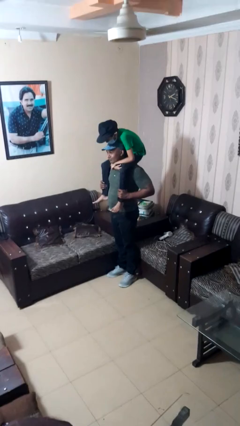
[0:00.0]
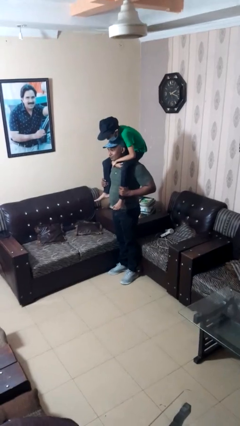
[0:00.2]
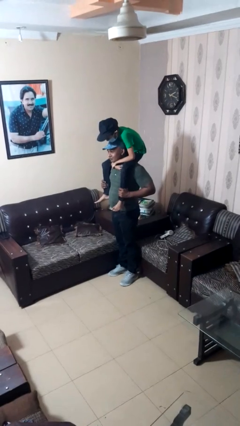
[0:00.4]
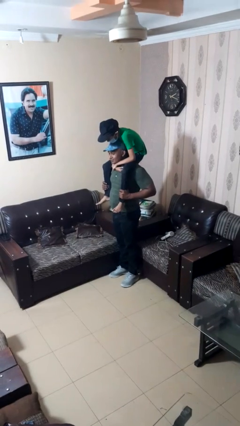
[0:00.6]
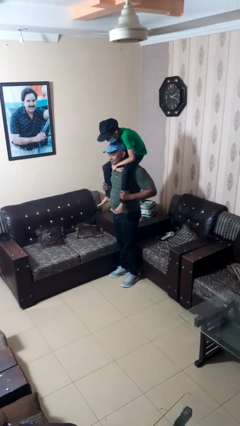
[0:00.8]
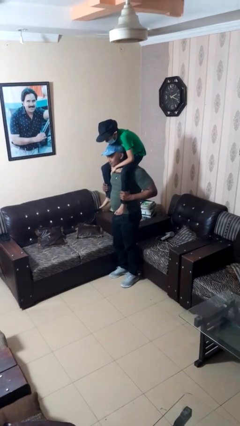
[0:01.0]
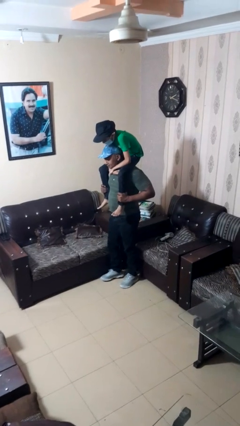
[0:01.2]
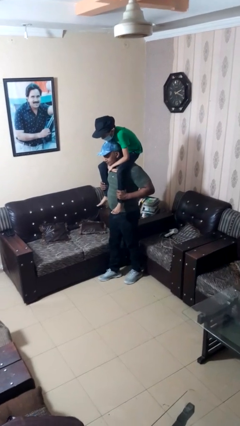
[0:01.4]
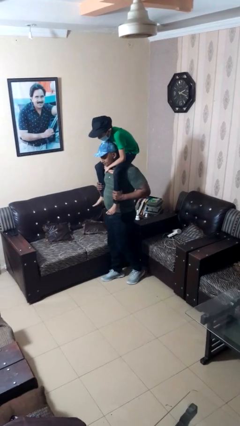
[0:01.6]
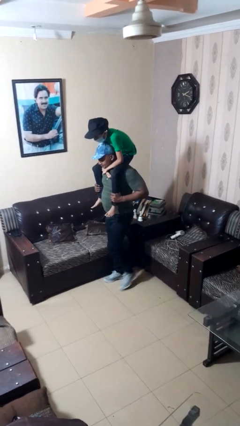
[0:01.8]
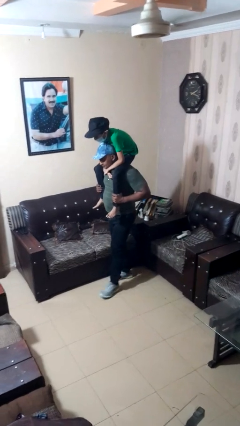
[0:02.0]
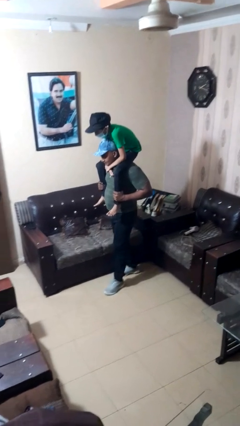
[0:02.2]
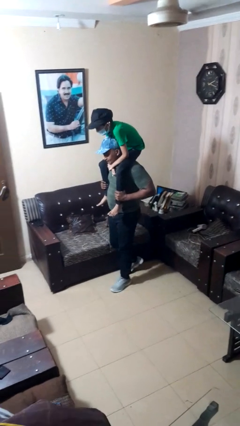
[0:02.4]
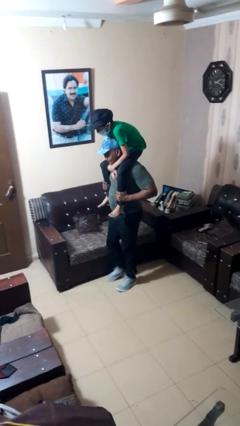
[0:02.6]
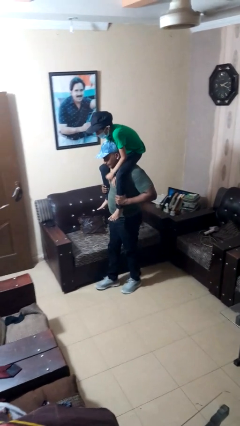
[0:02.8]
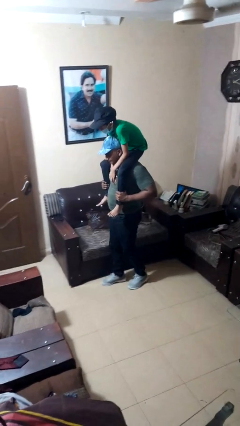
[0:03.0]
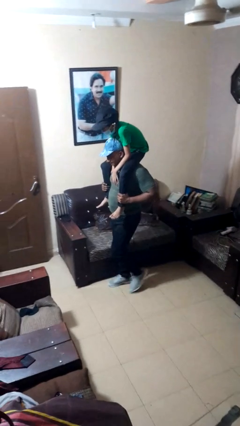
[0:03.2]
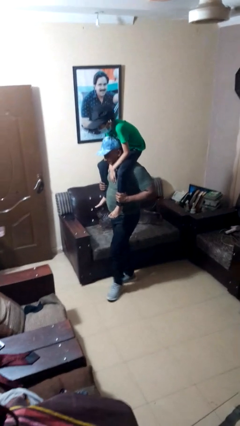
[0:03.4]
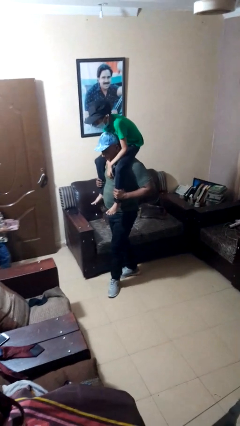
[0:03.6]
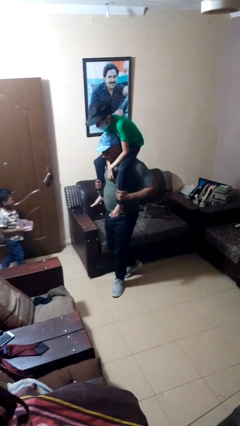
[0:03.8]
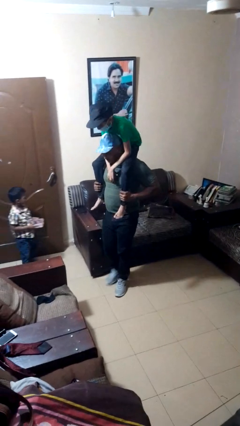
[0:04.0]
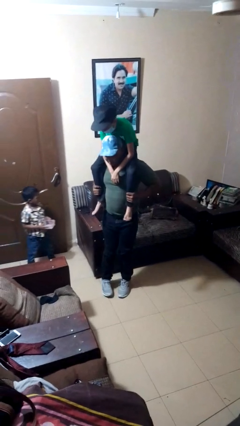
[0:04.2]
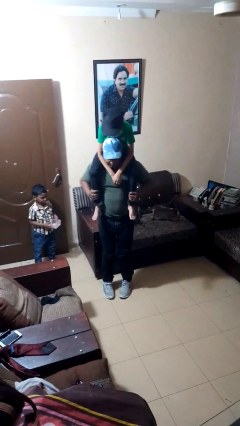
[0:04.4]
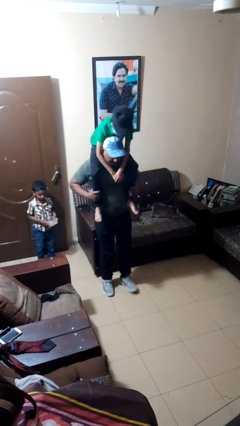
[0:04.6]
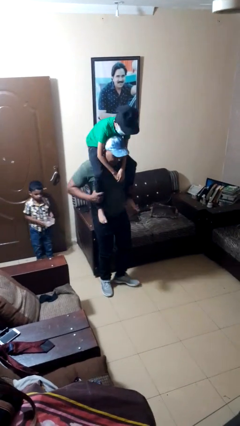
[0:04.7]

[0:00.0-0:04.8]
person carries person on shoulders

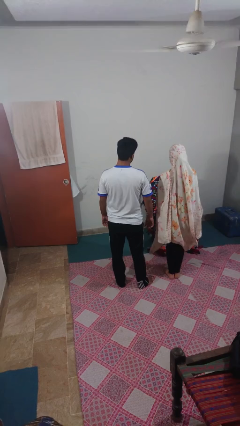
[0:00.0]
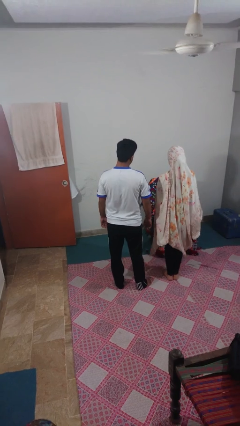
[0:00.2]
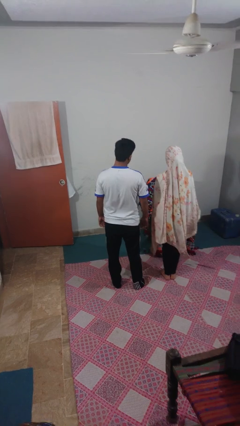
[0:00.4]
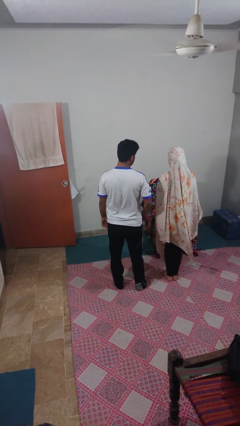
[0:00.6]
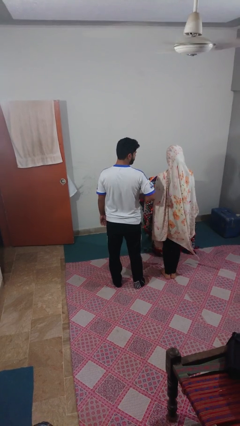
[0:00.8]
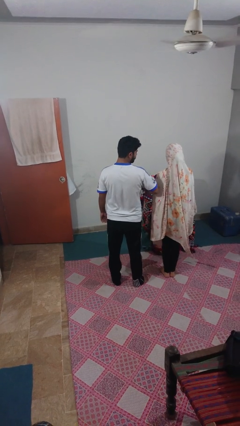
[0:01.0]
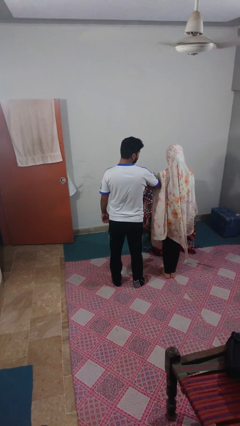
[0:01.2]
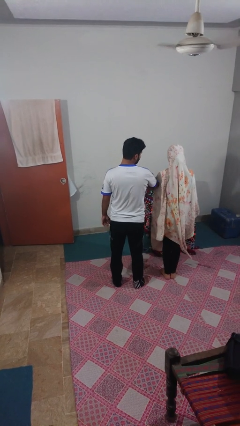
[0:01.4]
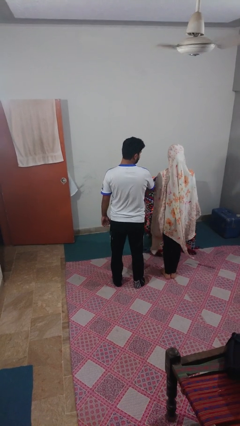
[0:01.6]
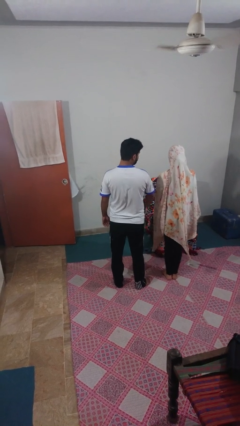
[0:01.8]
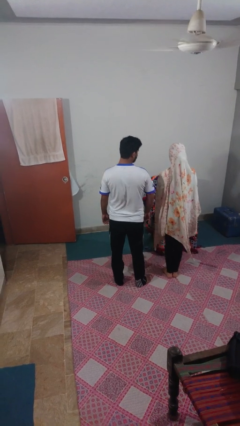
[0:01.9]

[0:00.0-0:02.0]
person nudges person with elbow

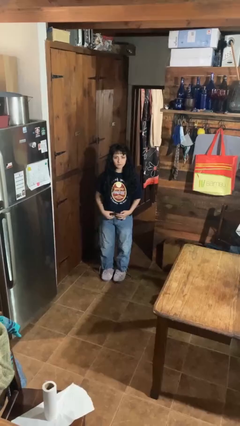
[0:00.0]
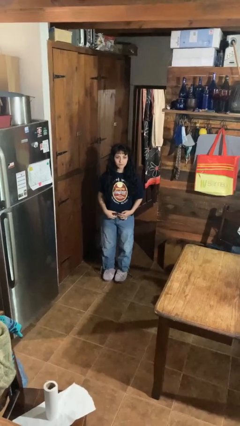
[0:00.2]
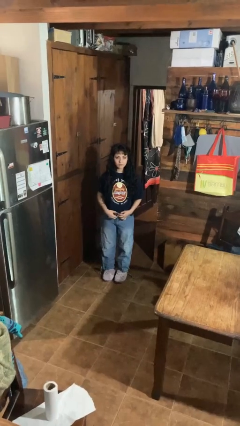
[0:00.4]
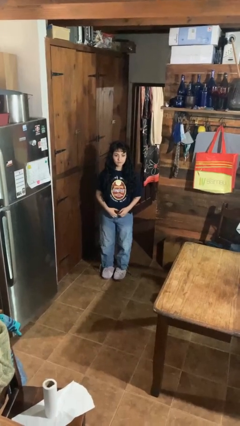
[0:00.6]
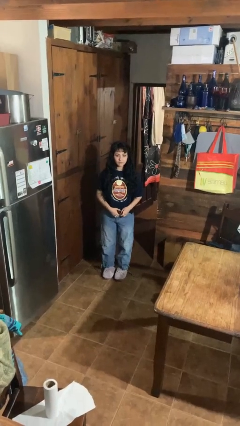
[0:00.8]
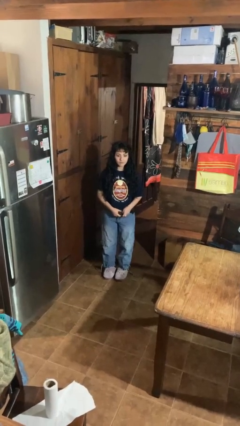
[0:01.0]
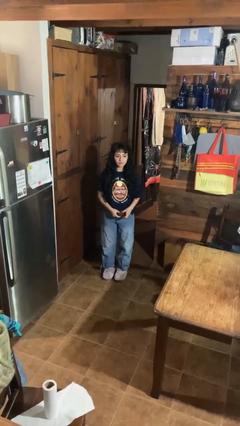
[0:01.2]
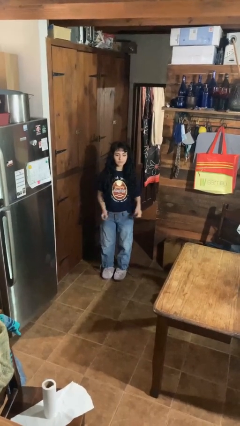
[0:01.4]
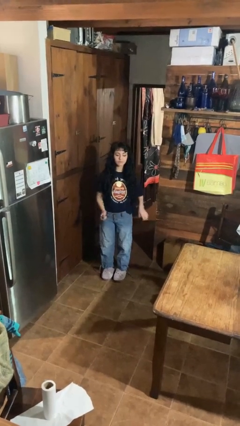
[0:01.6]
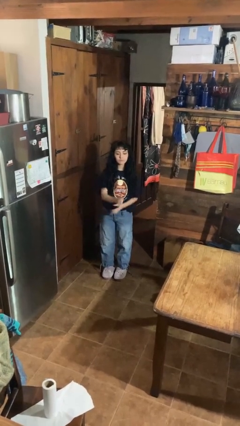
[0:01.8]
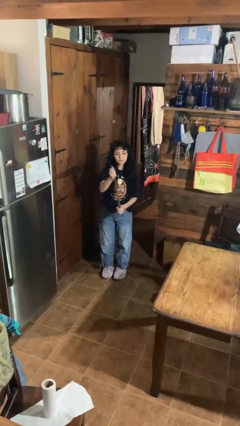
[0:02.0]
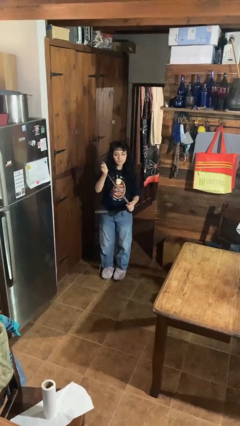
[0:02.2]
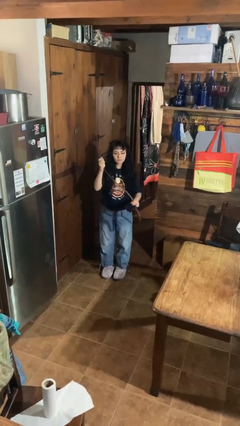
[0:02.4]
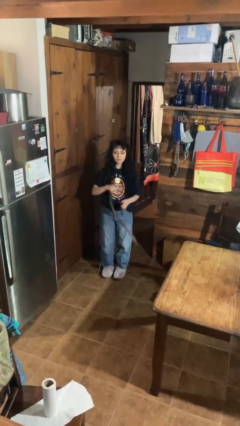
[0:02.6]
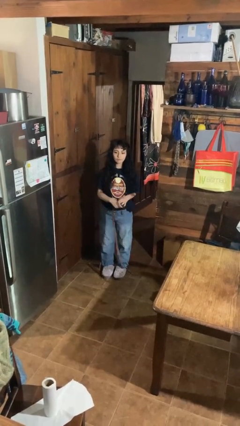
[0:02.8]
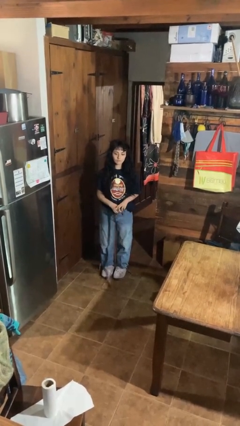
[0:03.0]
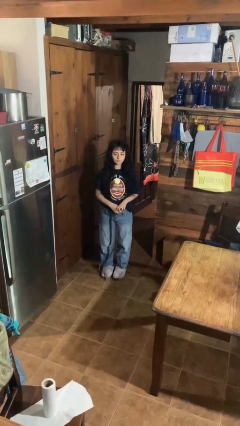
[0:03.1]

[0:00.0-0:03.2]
person takes off belt

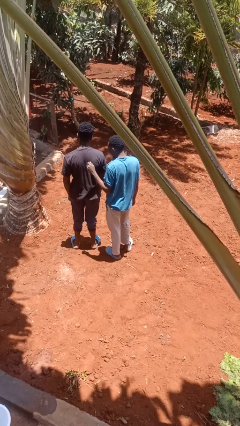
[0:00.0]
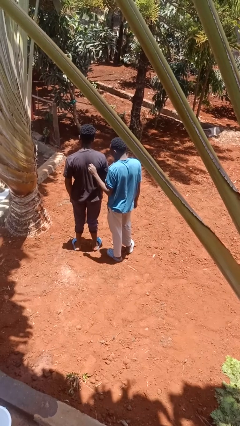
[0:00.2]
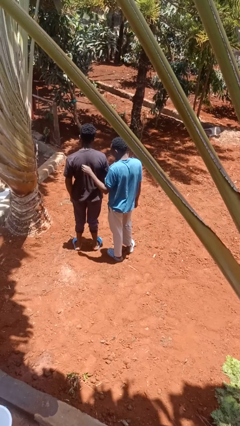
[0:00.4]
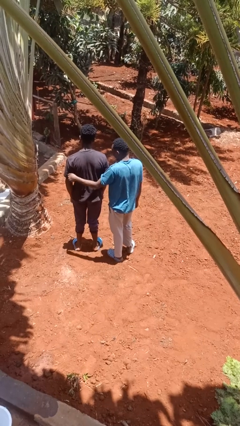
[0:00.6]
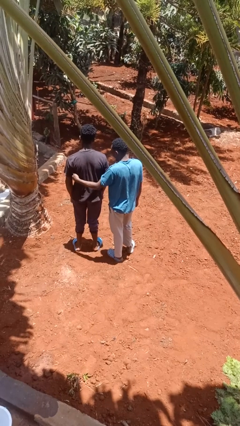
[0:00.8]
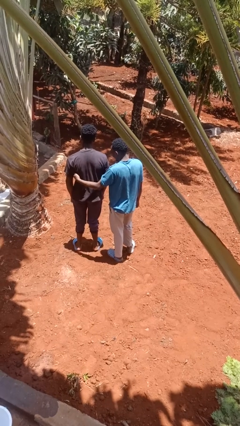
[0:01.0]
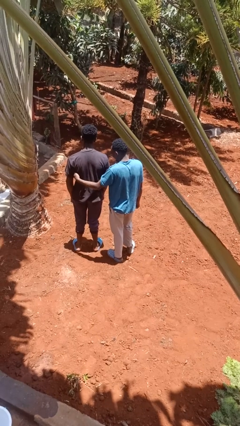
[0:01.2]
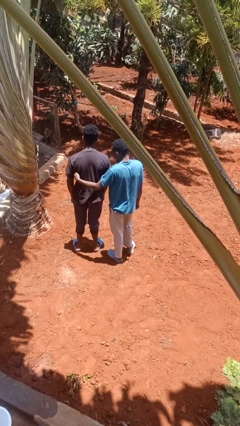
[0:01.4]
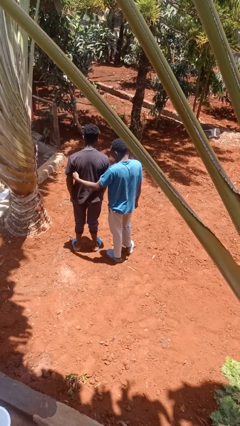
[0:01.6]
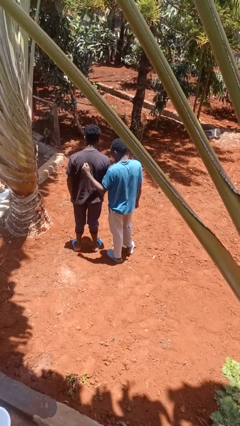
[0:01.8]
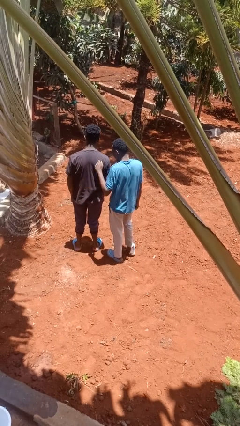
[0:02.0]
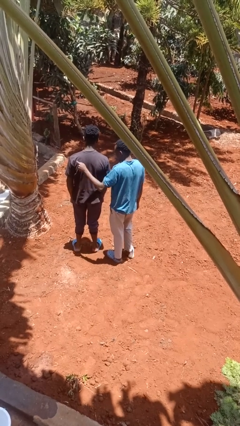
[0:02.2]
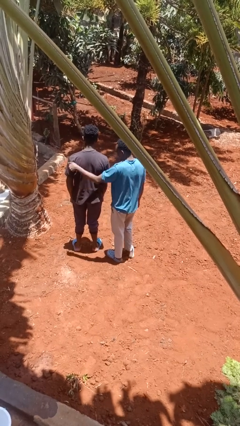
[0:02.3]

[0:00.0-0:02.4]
person tickles person

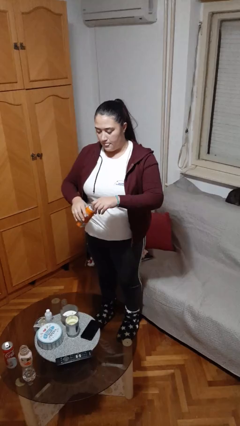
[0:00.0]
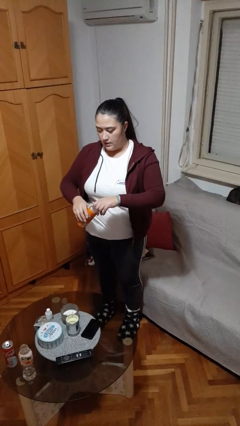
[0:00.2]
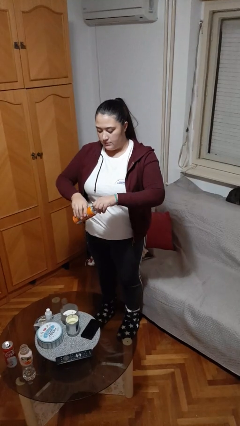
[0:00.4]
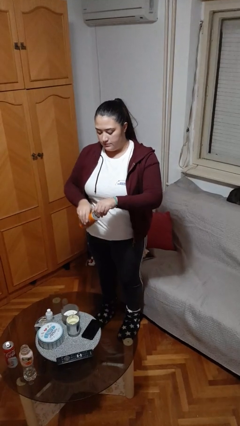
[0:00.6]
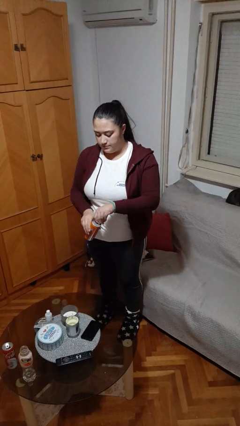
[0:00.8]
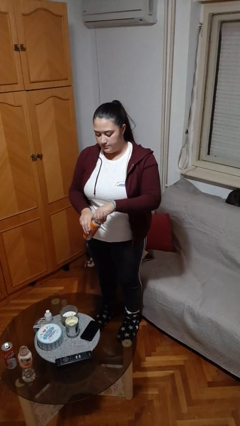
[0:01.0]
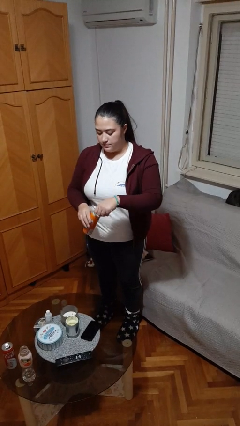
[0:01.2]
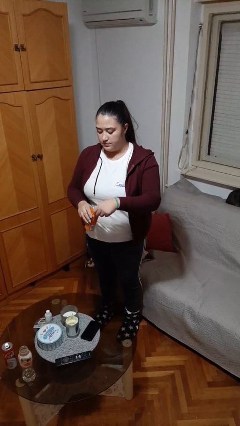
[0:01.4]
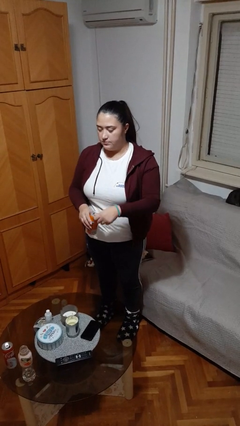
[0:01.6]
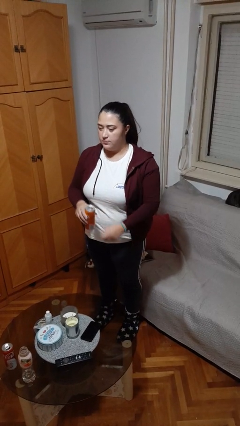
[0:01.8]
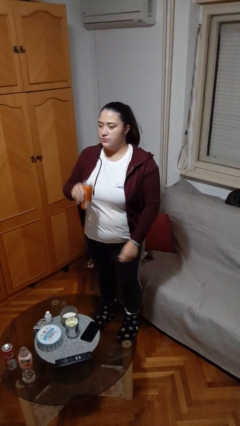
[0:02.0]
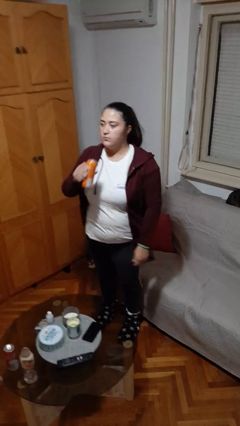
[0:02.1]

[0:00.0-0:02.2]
person opens beverage can

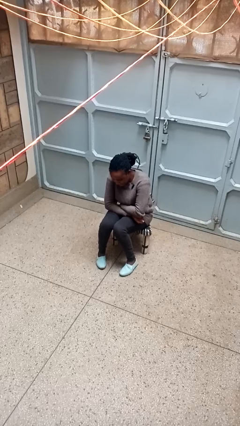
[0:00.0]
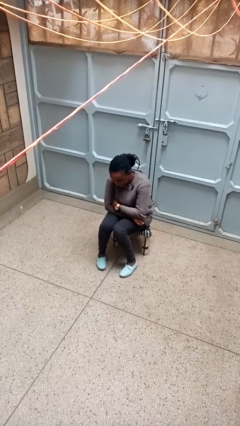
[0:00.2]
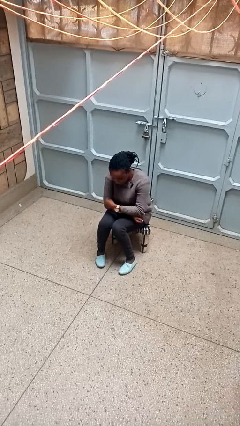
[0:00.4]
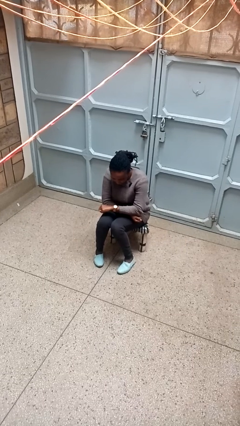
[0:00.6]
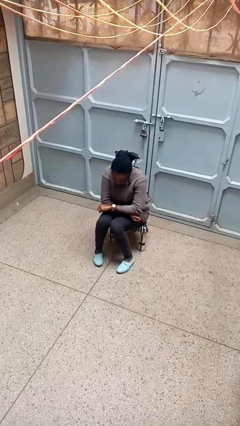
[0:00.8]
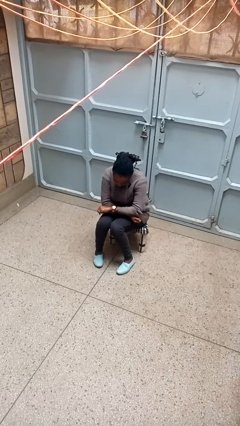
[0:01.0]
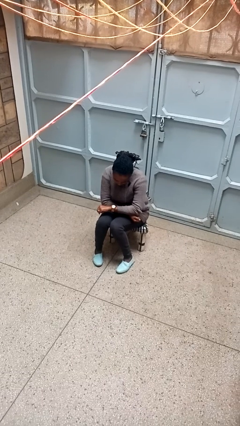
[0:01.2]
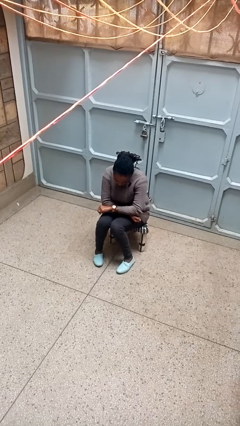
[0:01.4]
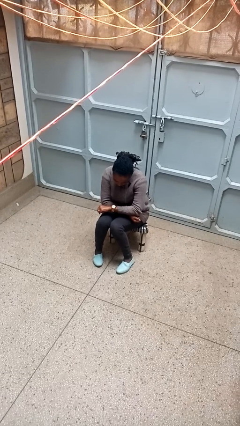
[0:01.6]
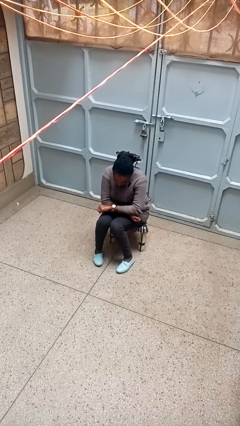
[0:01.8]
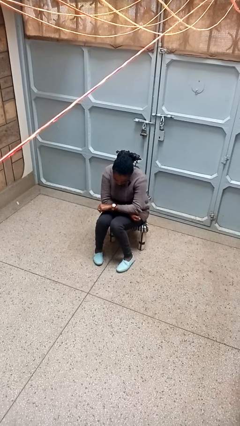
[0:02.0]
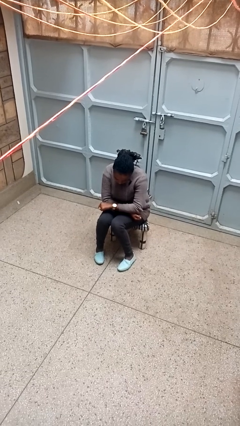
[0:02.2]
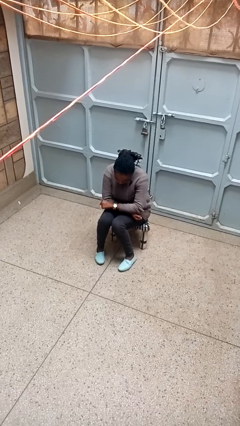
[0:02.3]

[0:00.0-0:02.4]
person looks at wristwatch

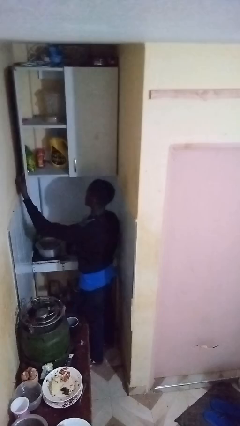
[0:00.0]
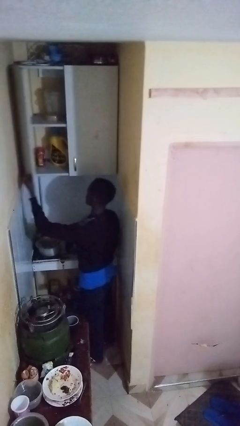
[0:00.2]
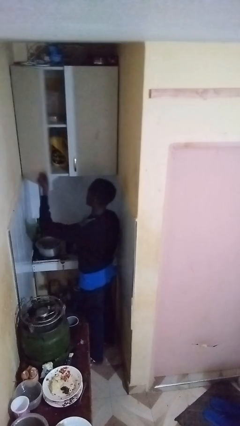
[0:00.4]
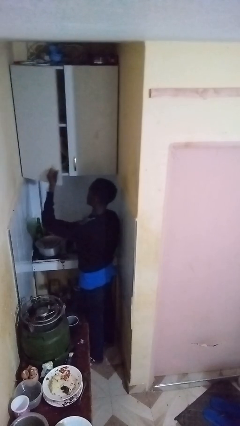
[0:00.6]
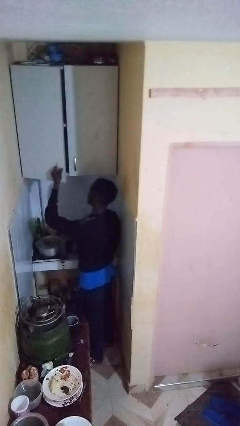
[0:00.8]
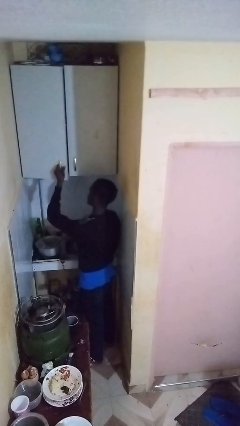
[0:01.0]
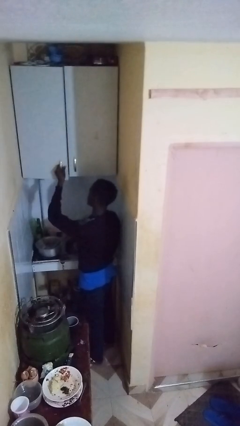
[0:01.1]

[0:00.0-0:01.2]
person closes kitchen drawer
